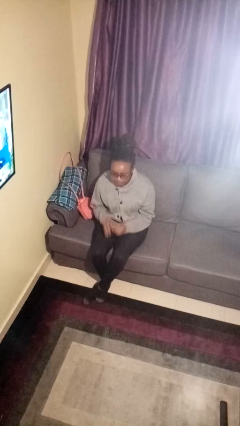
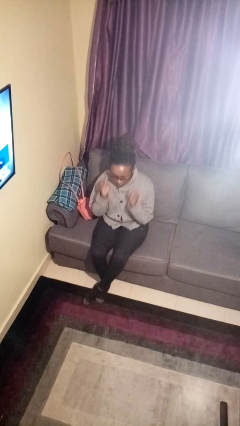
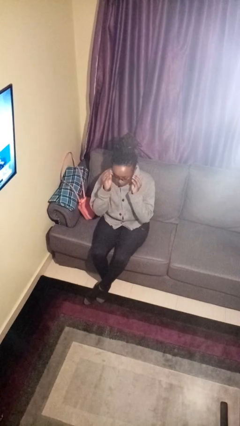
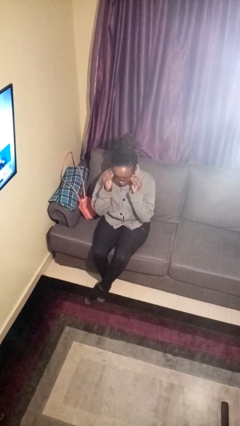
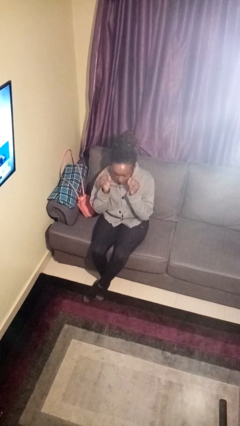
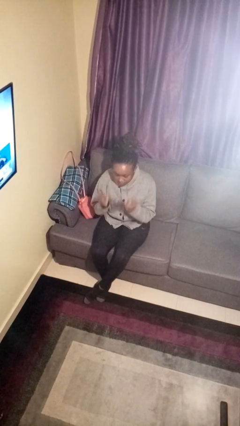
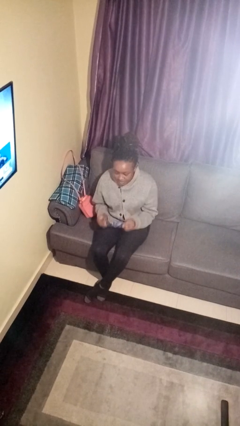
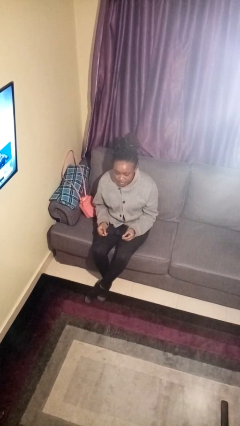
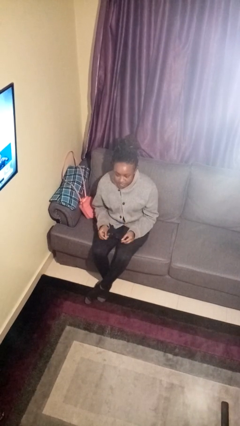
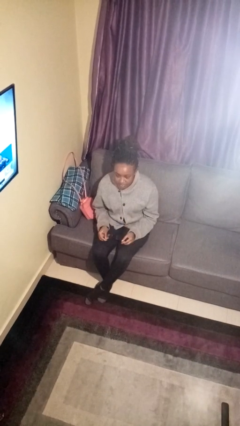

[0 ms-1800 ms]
person takes off glasses

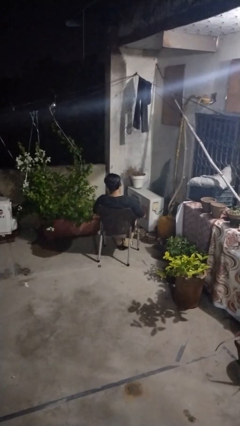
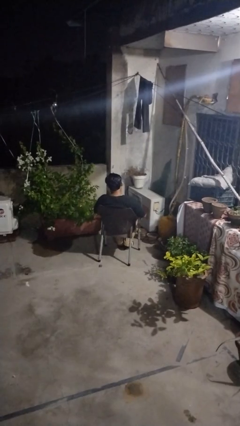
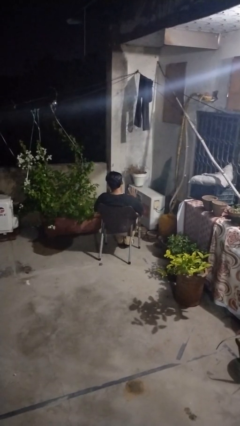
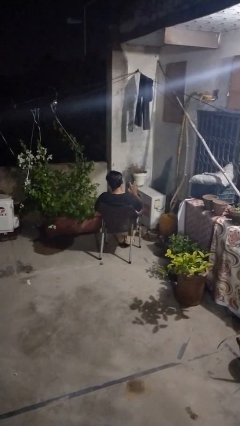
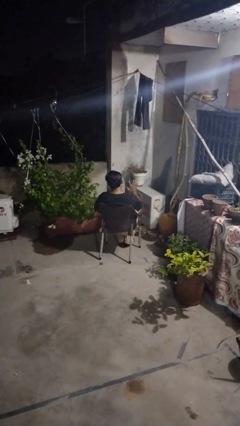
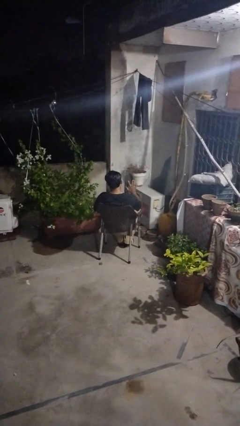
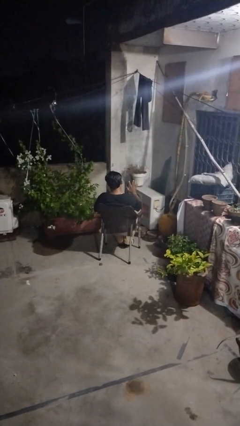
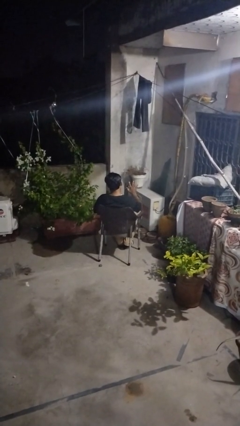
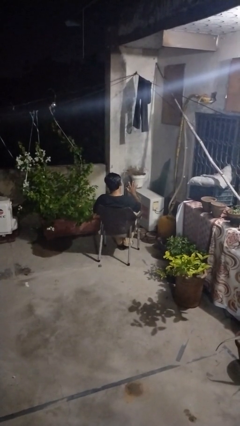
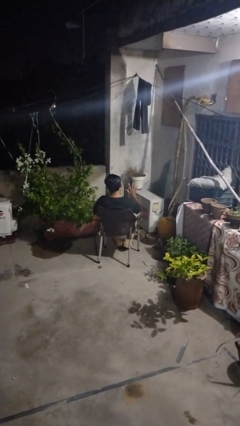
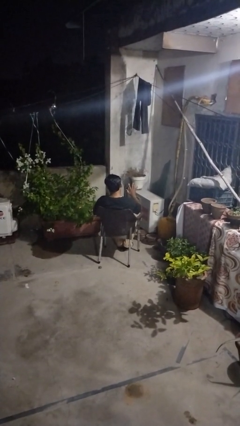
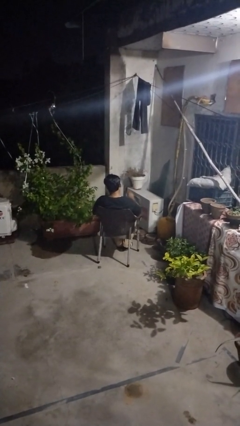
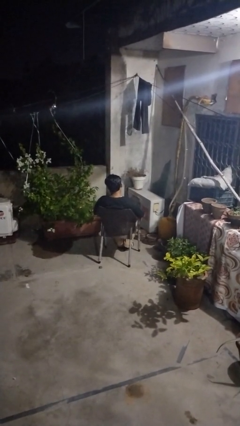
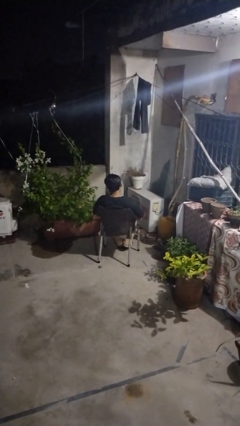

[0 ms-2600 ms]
person gestures number five

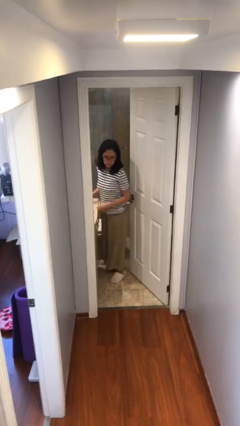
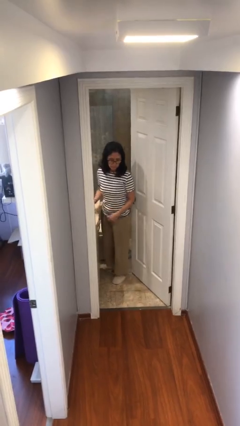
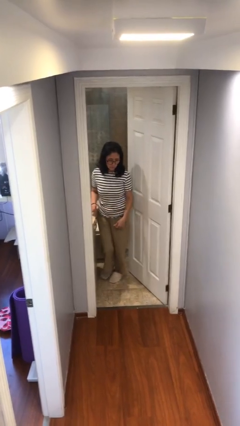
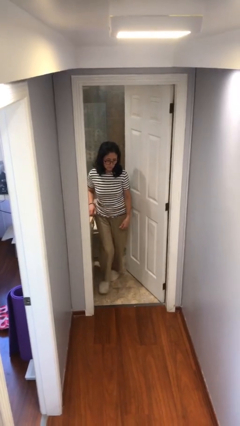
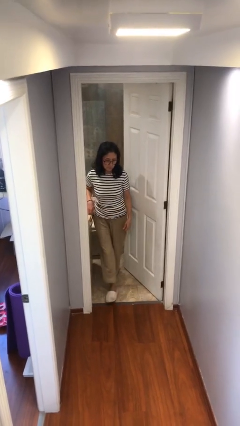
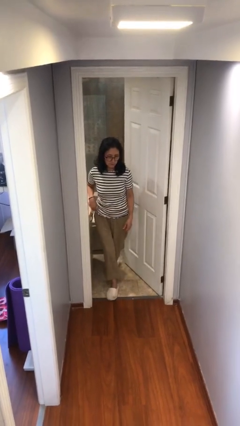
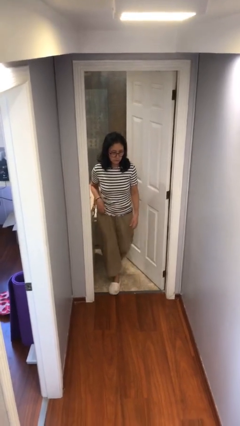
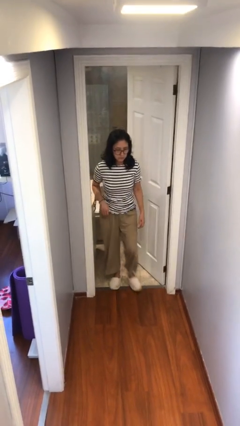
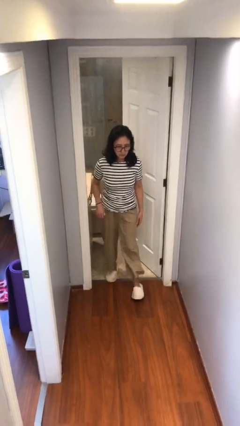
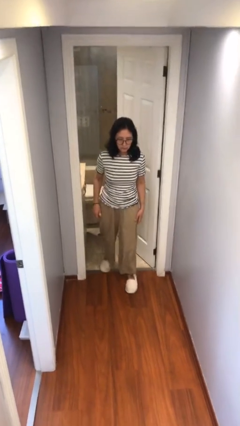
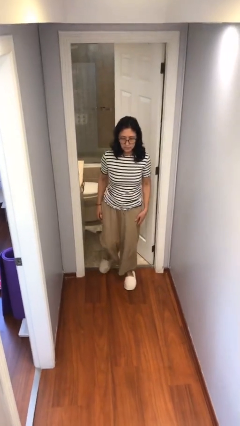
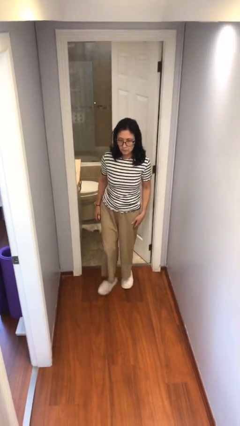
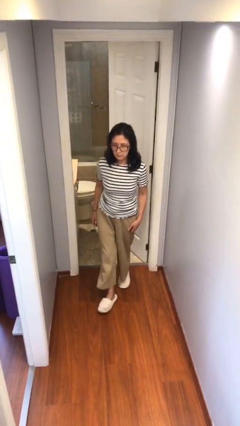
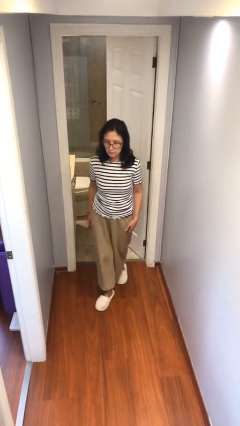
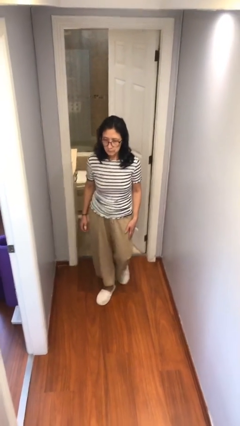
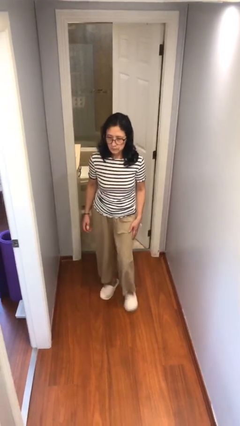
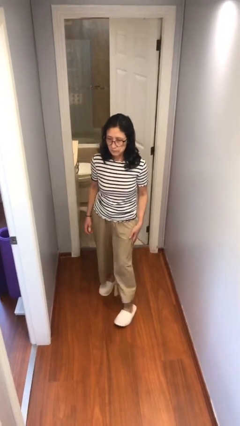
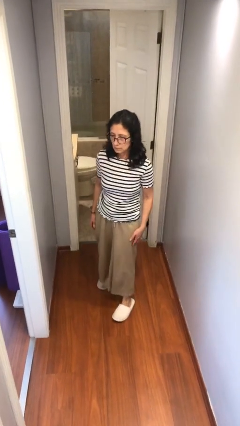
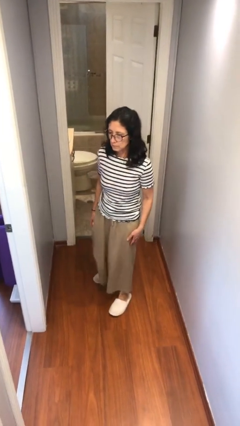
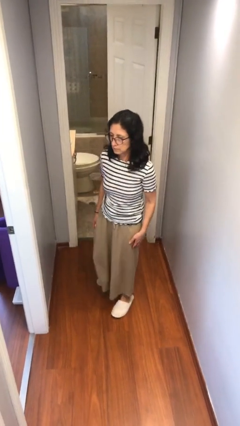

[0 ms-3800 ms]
person enters scene through structure

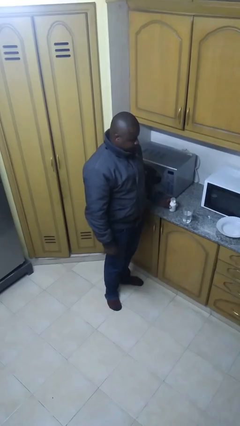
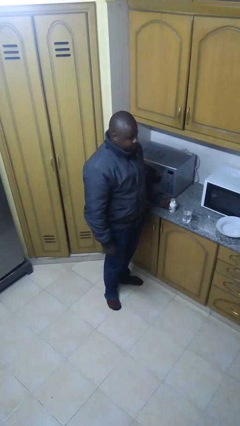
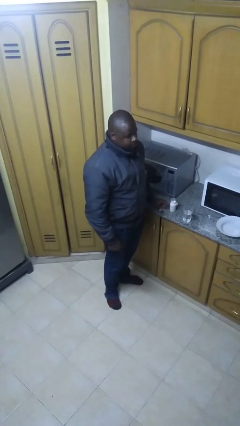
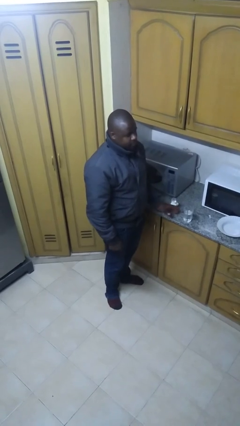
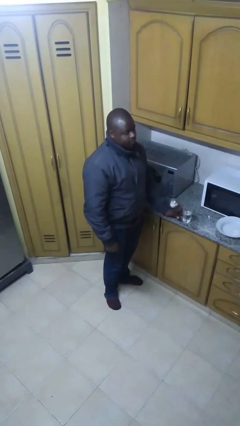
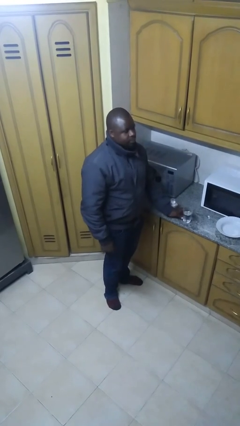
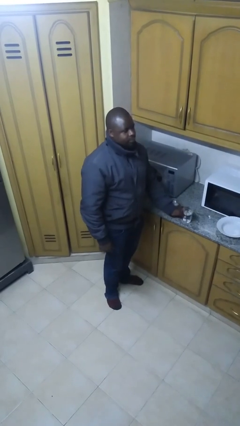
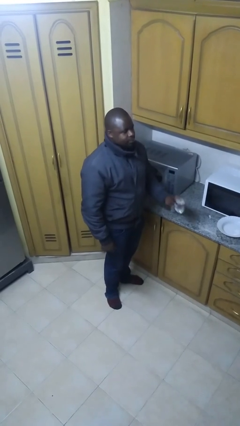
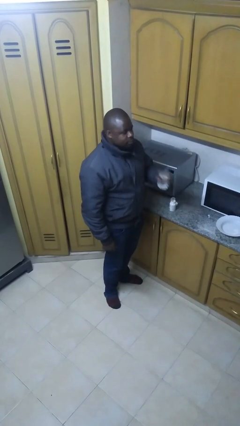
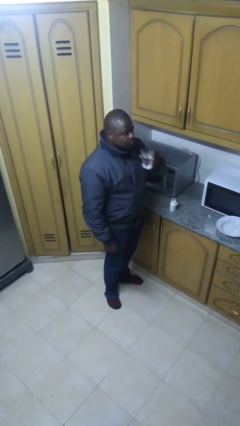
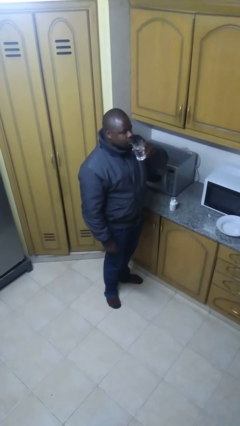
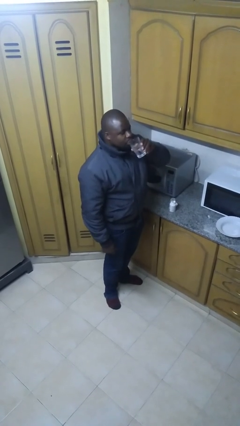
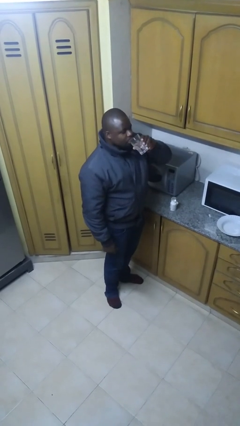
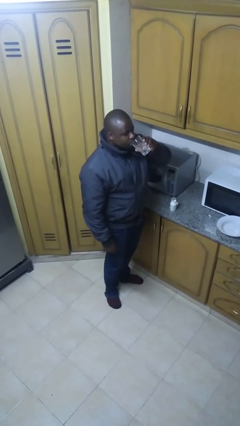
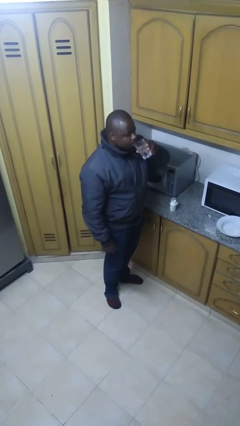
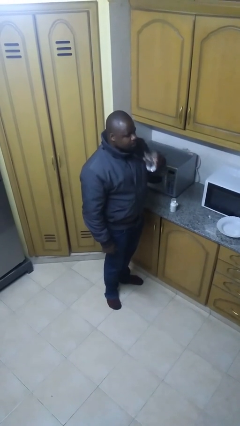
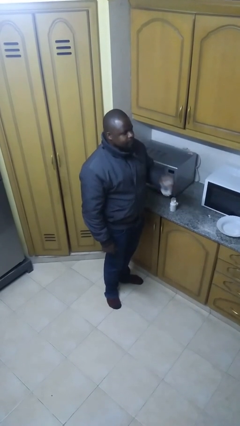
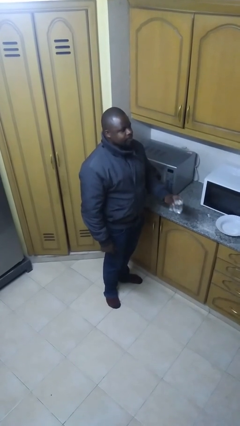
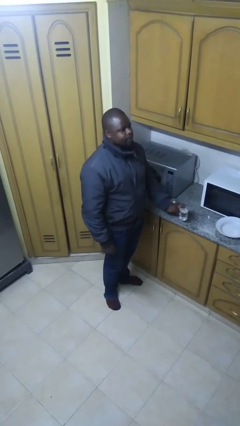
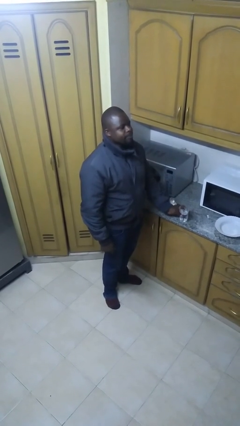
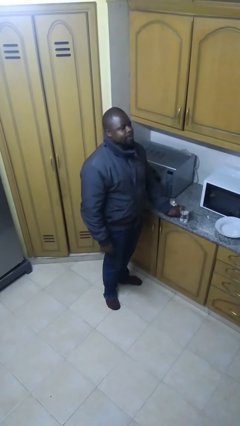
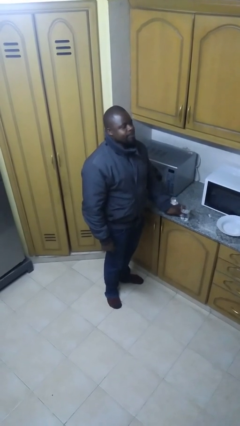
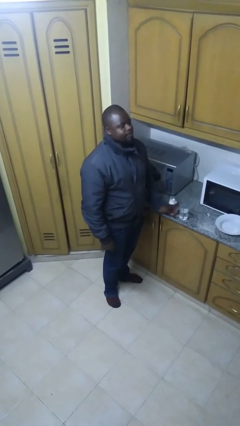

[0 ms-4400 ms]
person drinks from cup

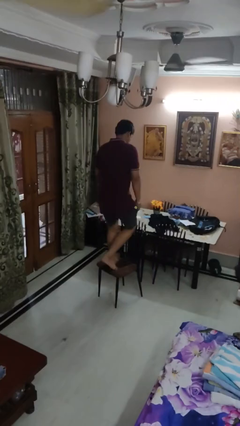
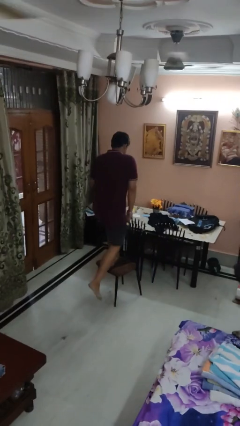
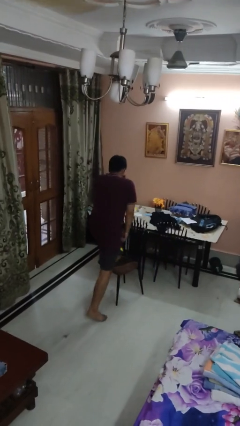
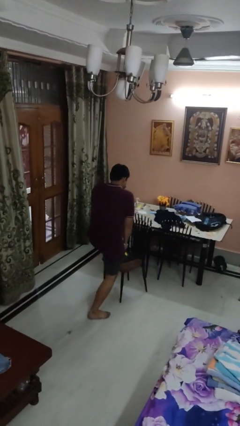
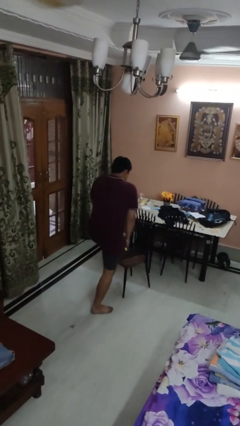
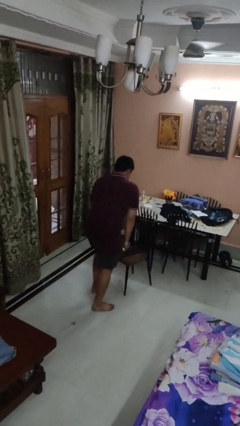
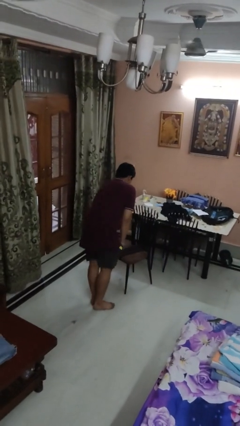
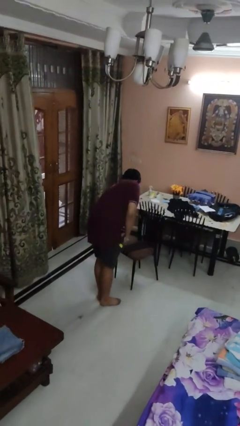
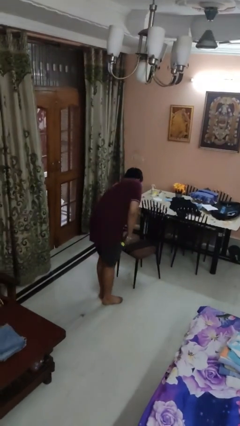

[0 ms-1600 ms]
person climbs off chair

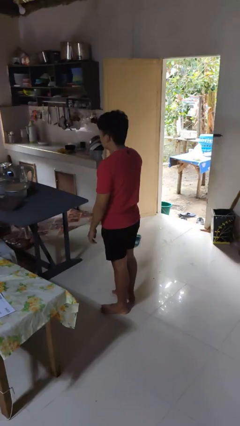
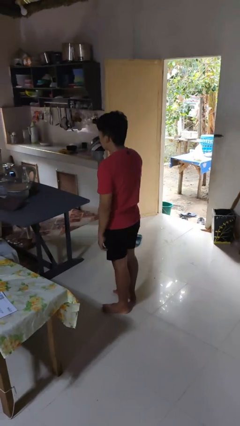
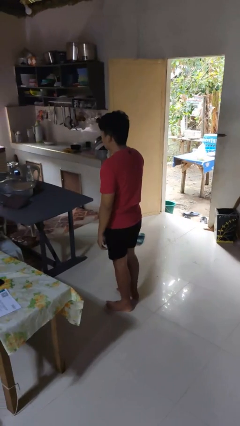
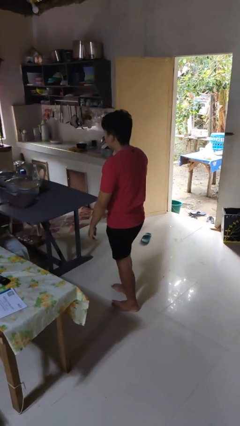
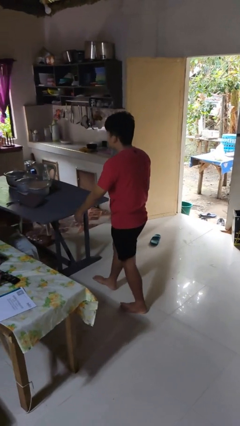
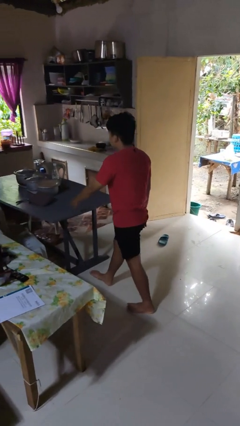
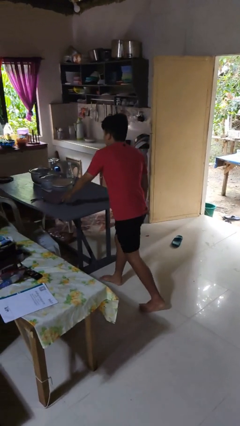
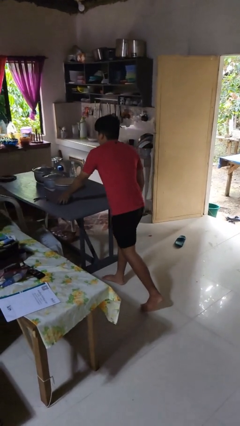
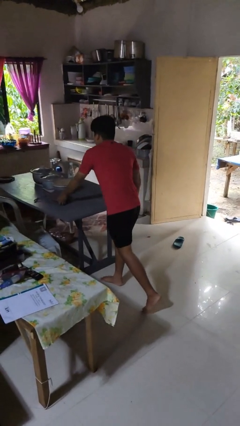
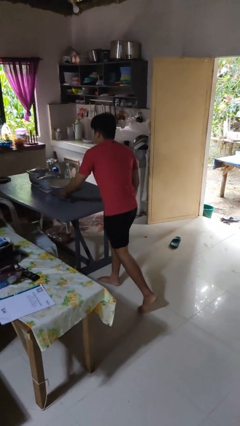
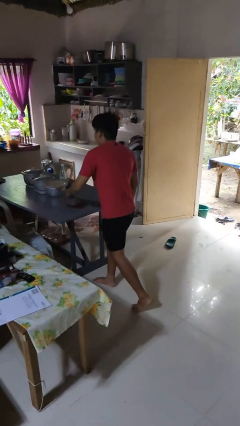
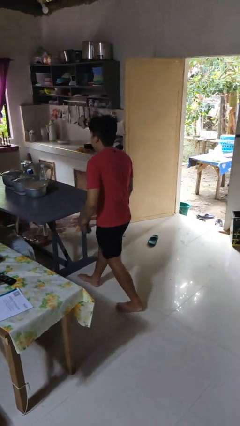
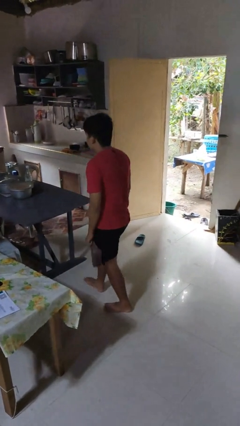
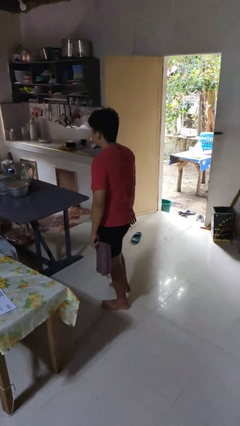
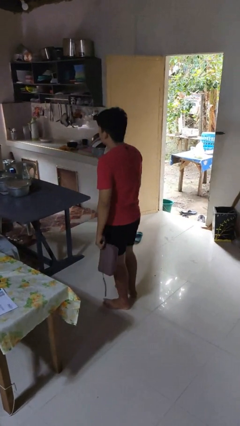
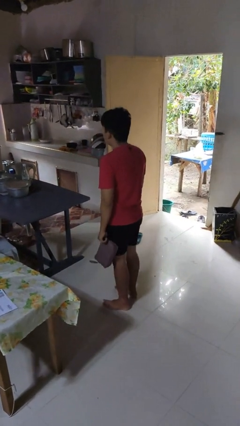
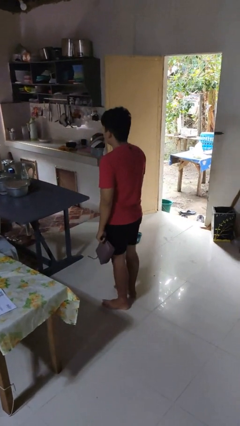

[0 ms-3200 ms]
person picks up object from table
